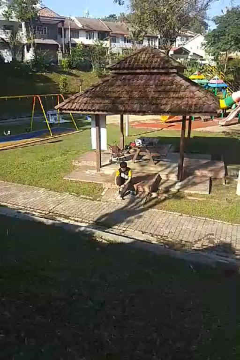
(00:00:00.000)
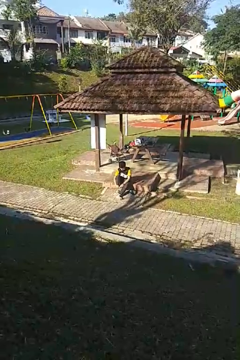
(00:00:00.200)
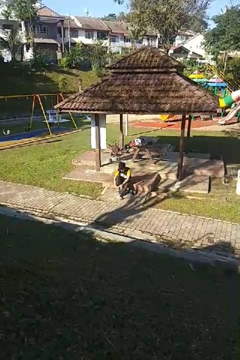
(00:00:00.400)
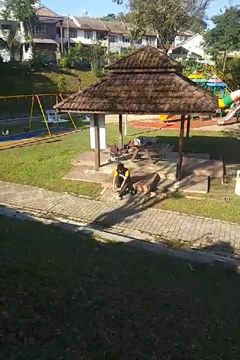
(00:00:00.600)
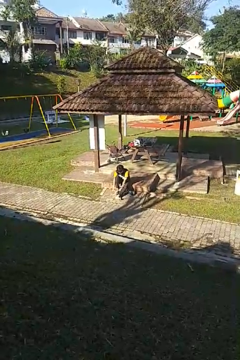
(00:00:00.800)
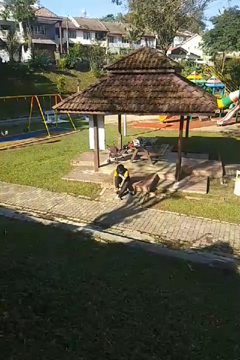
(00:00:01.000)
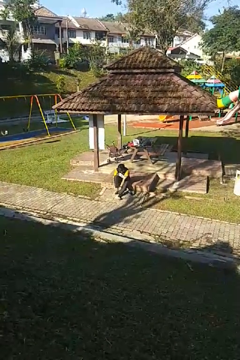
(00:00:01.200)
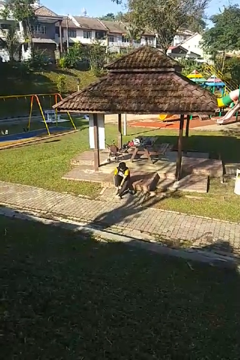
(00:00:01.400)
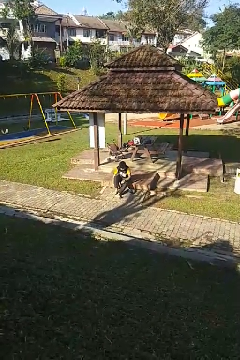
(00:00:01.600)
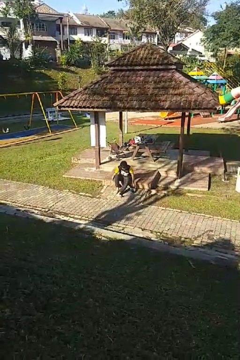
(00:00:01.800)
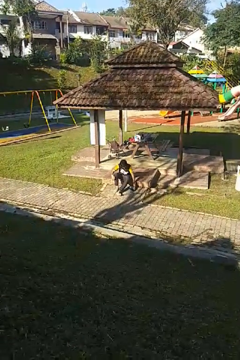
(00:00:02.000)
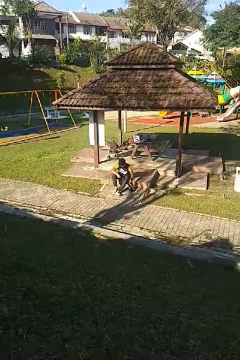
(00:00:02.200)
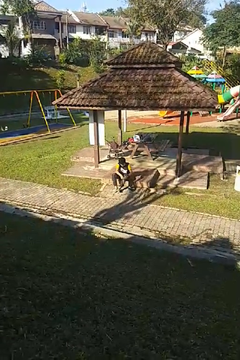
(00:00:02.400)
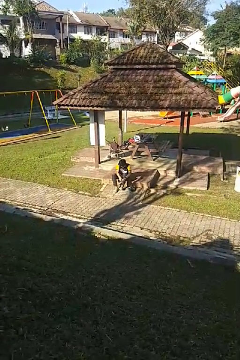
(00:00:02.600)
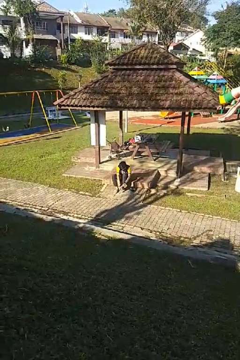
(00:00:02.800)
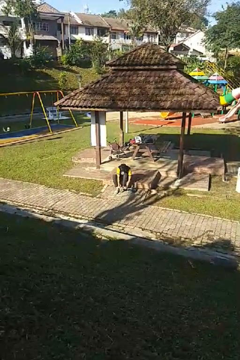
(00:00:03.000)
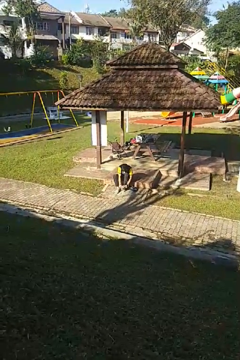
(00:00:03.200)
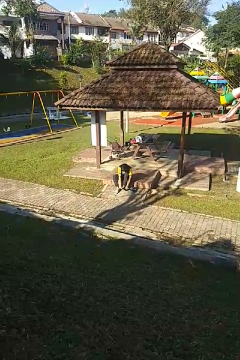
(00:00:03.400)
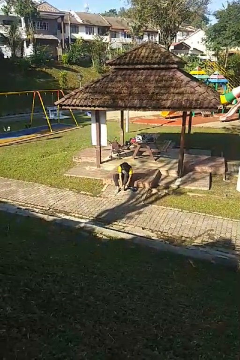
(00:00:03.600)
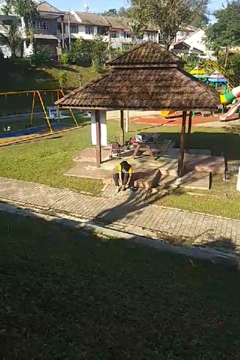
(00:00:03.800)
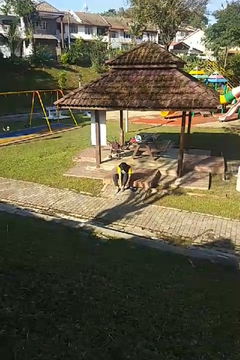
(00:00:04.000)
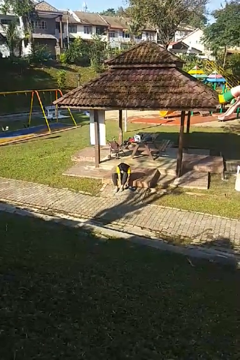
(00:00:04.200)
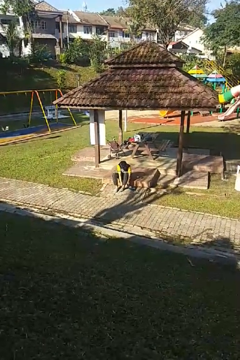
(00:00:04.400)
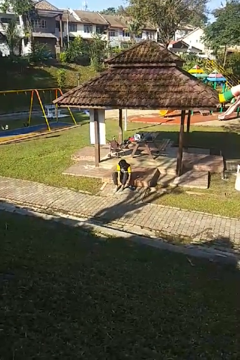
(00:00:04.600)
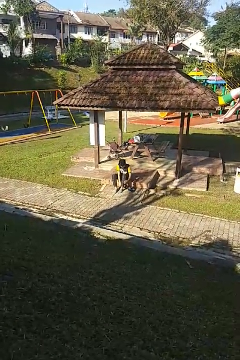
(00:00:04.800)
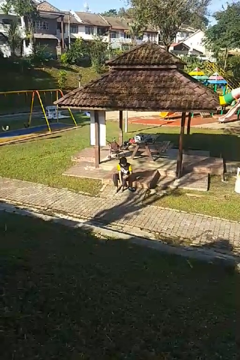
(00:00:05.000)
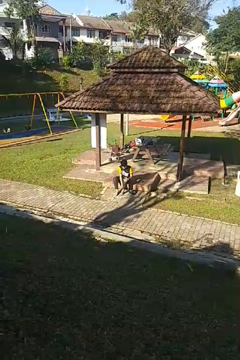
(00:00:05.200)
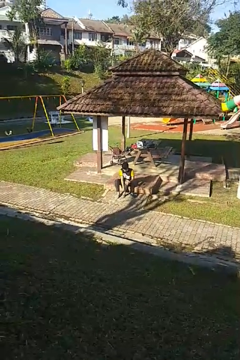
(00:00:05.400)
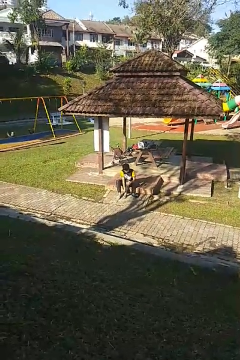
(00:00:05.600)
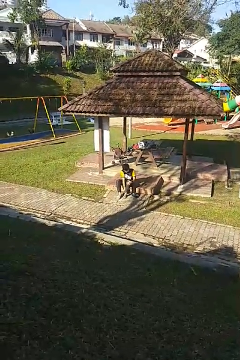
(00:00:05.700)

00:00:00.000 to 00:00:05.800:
person puts on socks

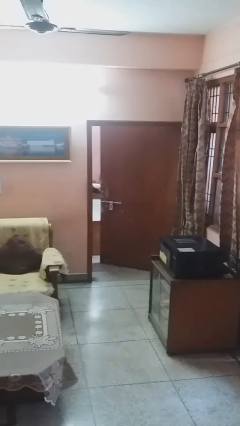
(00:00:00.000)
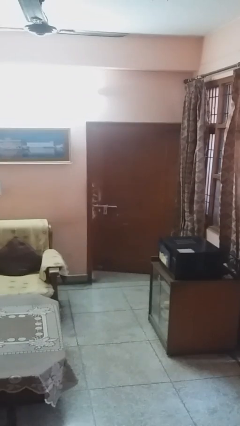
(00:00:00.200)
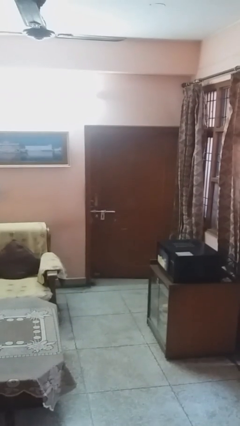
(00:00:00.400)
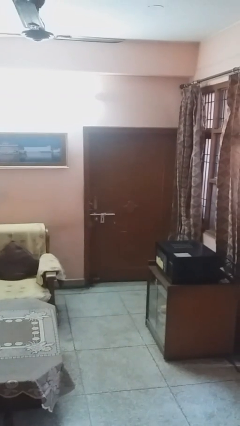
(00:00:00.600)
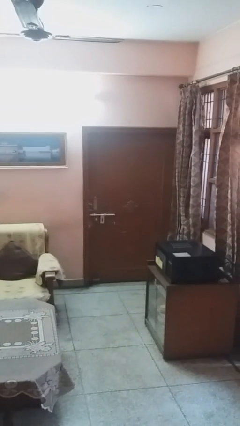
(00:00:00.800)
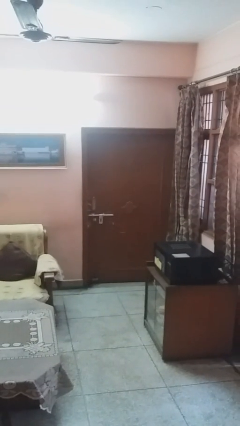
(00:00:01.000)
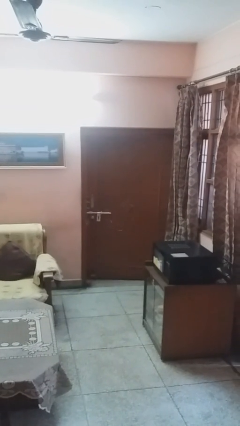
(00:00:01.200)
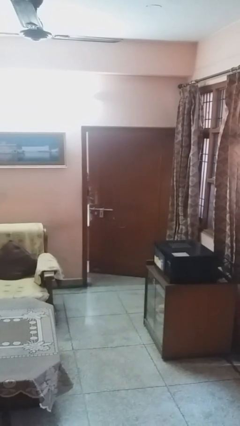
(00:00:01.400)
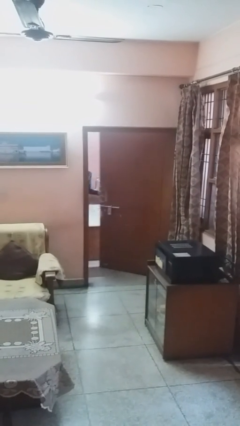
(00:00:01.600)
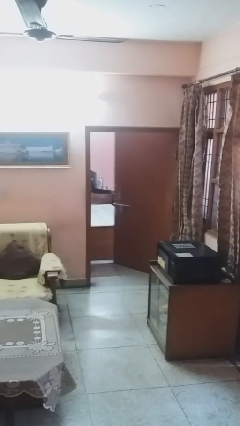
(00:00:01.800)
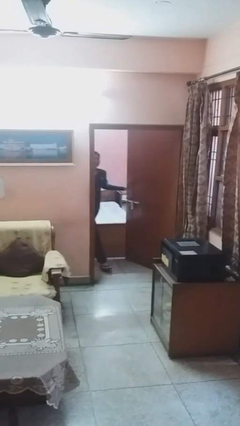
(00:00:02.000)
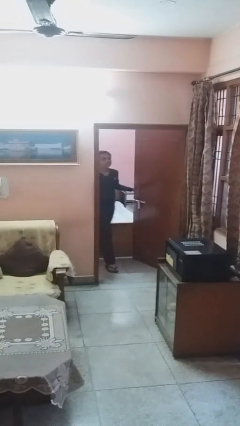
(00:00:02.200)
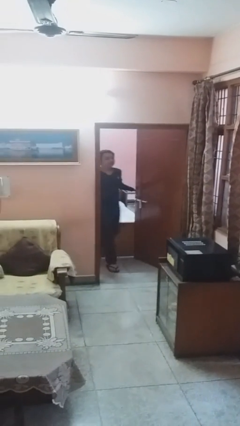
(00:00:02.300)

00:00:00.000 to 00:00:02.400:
person closes facility door

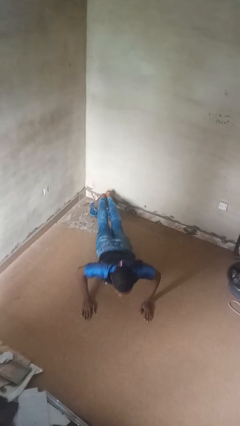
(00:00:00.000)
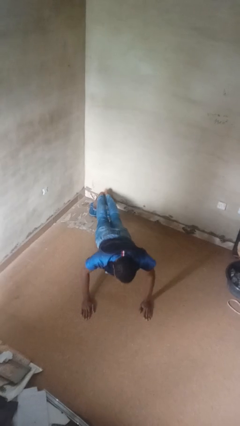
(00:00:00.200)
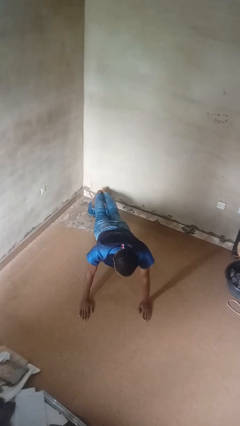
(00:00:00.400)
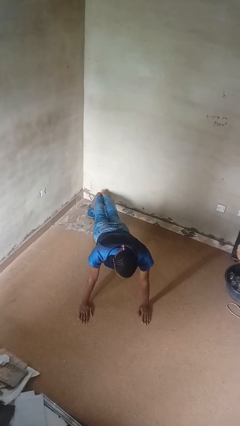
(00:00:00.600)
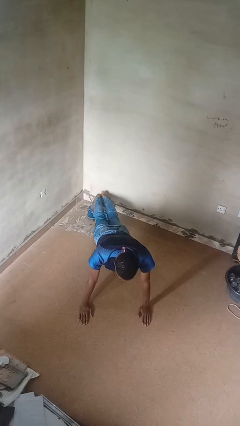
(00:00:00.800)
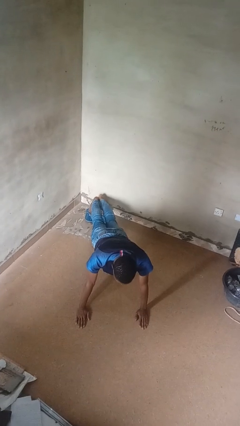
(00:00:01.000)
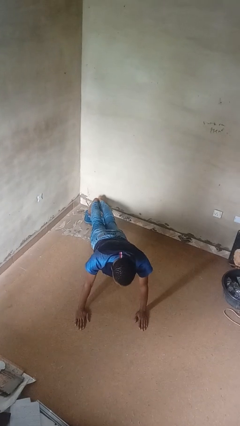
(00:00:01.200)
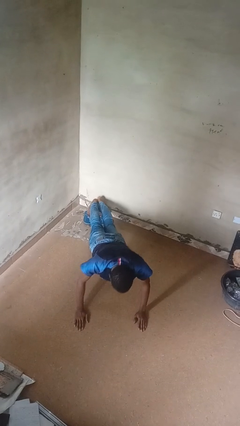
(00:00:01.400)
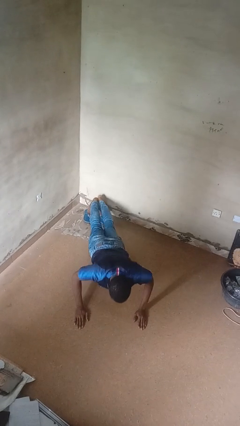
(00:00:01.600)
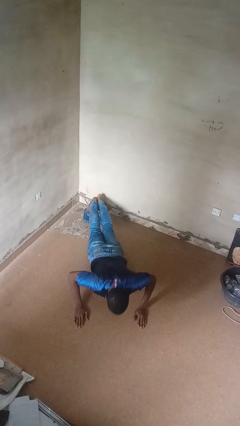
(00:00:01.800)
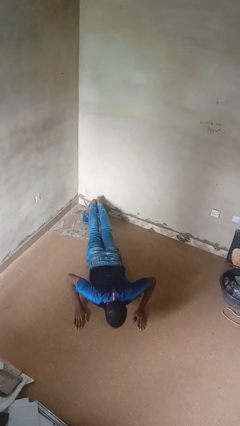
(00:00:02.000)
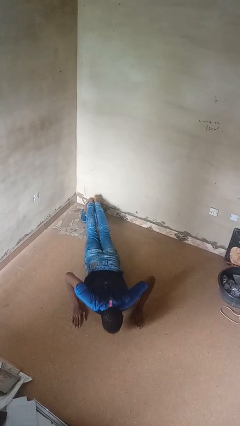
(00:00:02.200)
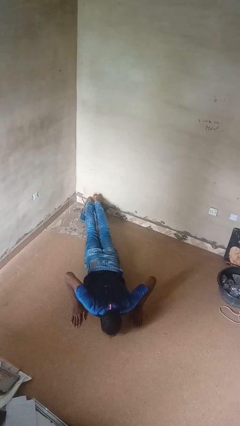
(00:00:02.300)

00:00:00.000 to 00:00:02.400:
person exercises with pushup

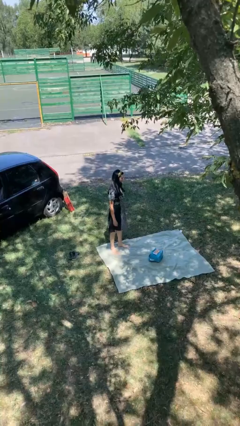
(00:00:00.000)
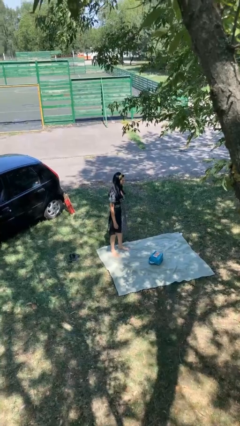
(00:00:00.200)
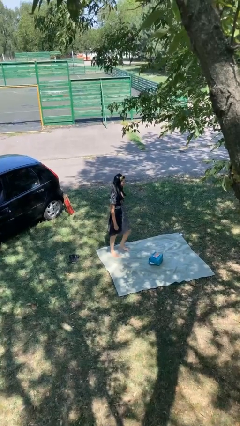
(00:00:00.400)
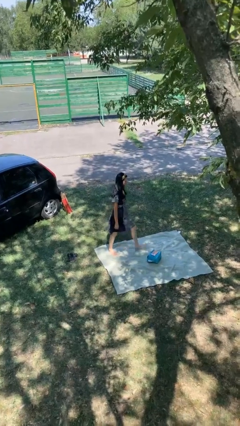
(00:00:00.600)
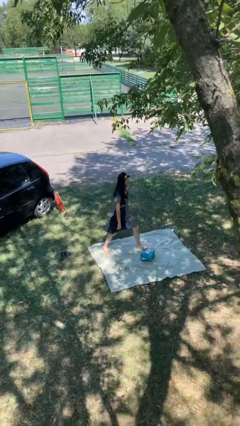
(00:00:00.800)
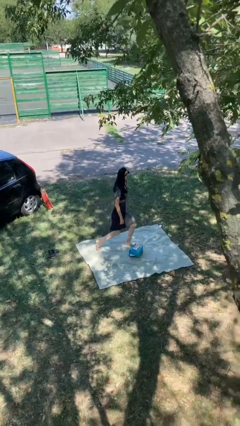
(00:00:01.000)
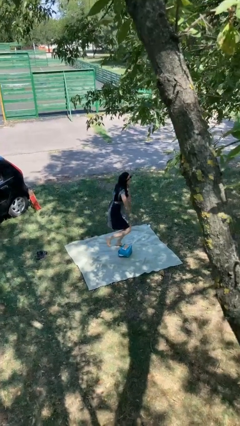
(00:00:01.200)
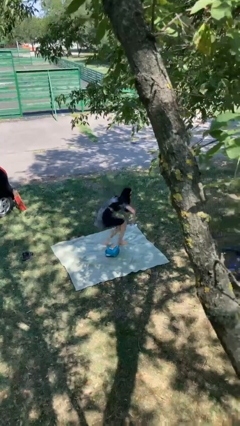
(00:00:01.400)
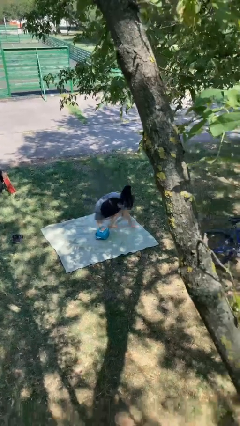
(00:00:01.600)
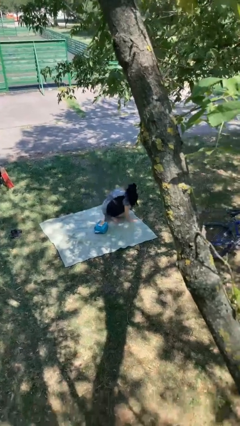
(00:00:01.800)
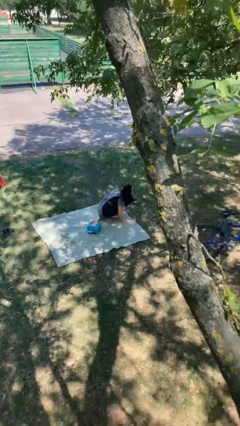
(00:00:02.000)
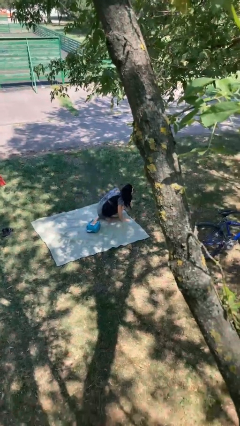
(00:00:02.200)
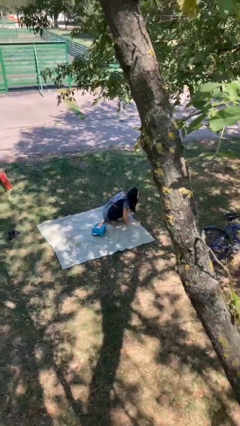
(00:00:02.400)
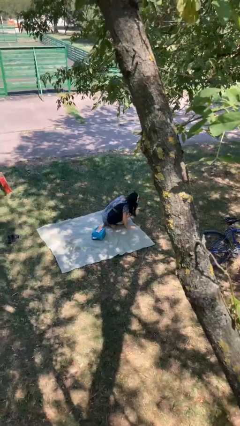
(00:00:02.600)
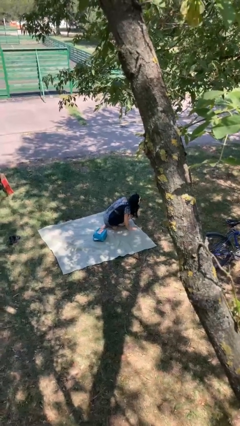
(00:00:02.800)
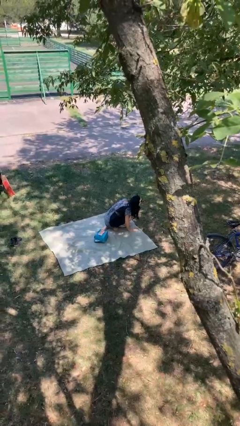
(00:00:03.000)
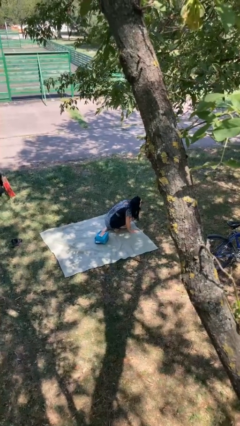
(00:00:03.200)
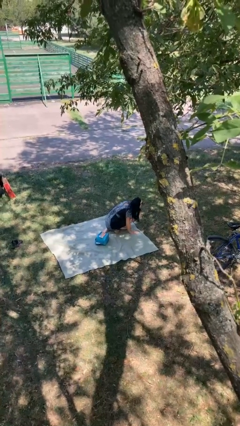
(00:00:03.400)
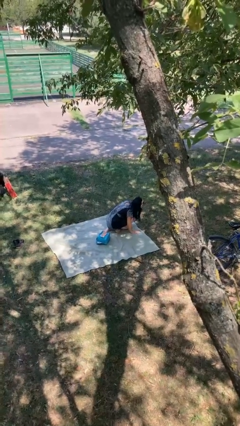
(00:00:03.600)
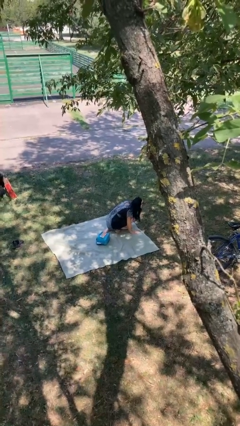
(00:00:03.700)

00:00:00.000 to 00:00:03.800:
person trips on object on floor

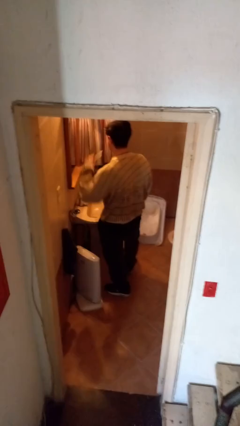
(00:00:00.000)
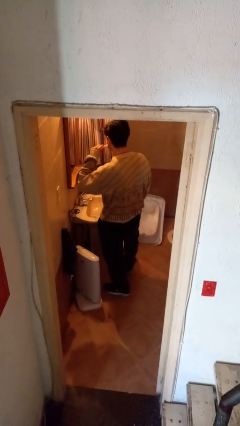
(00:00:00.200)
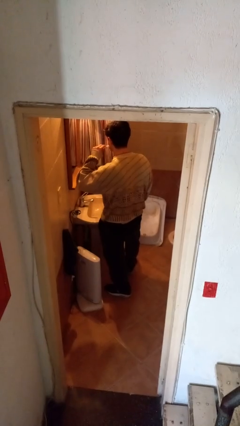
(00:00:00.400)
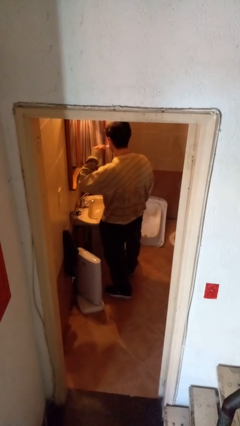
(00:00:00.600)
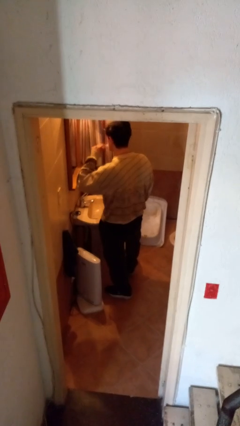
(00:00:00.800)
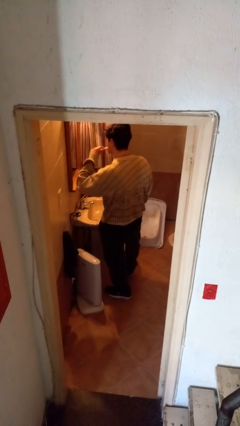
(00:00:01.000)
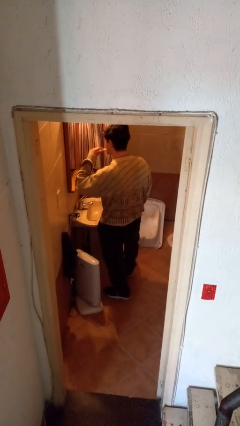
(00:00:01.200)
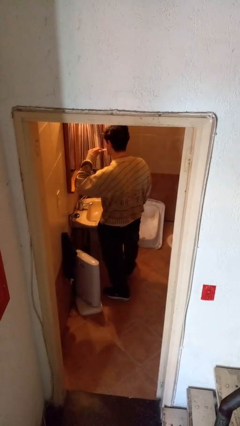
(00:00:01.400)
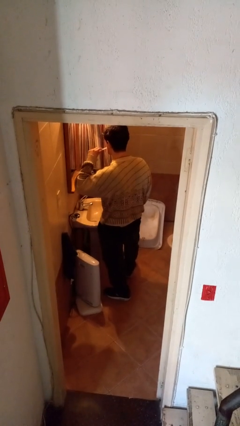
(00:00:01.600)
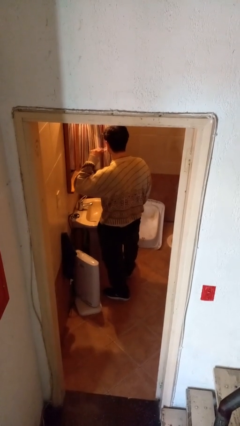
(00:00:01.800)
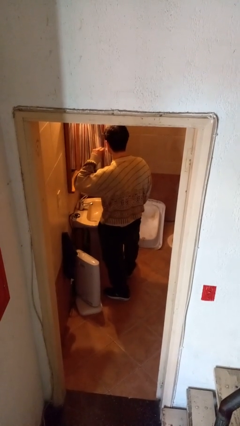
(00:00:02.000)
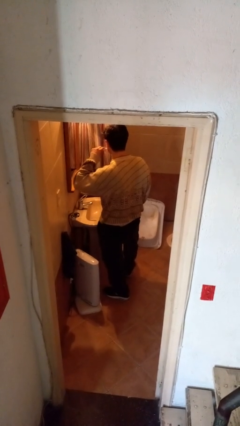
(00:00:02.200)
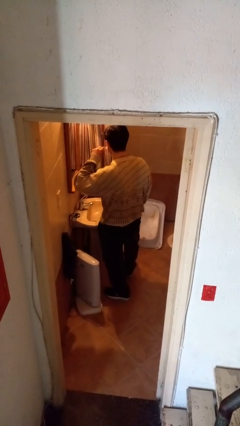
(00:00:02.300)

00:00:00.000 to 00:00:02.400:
person brushes teeth

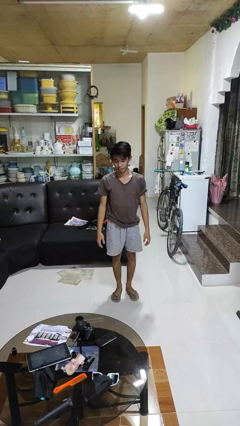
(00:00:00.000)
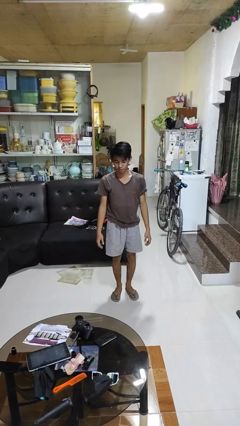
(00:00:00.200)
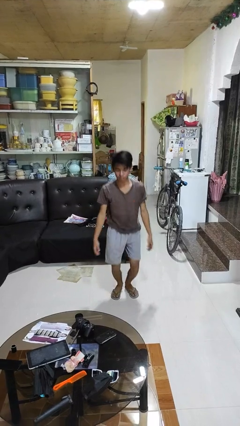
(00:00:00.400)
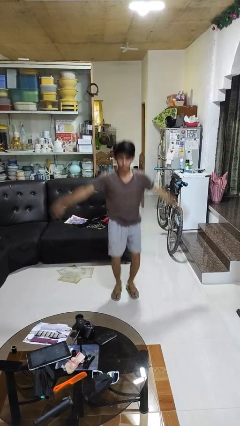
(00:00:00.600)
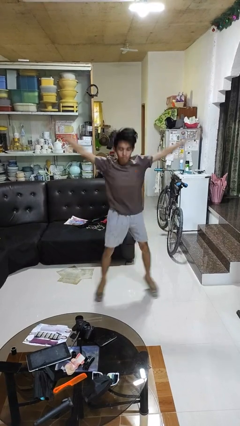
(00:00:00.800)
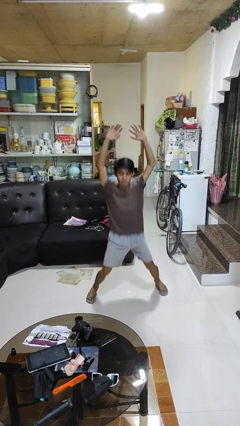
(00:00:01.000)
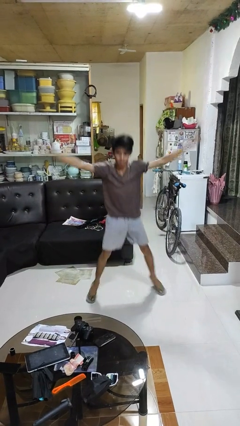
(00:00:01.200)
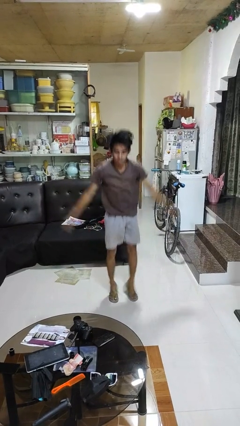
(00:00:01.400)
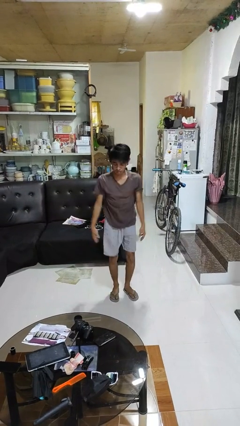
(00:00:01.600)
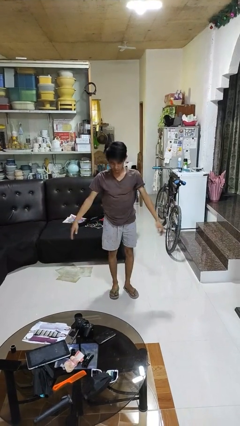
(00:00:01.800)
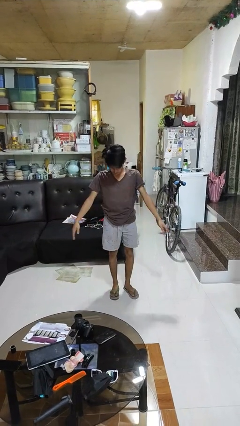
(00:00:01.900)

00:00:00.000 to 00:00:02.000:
person exercises with jumping jacks
